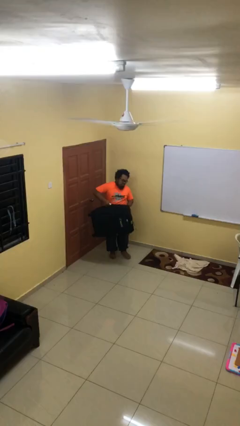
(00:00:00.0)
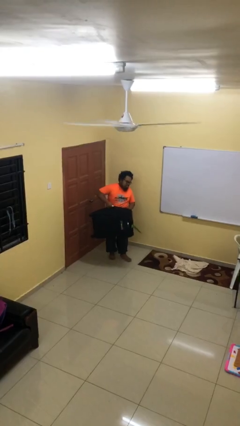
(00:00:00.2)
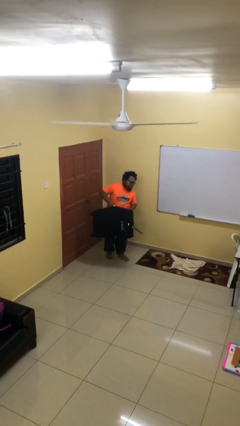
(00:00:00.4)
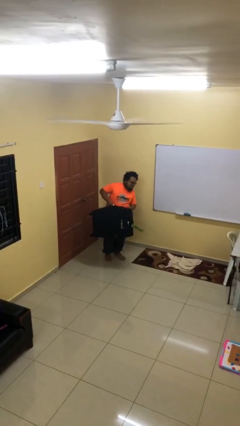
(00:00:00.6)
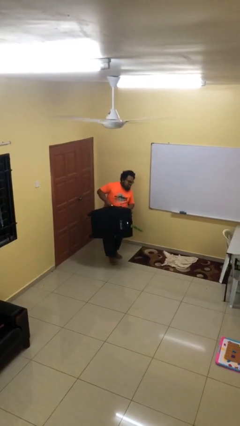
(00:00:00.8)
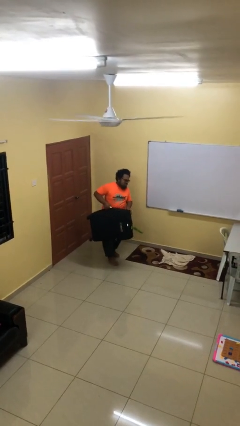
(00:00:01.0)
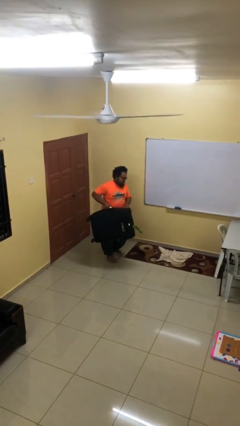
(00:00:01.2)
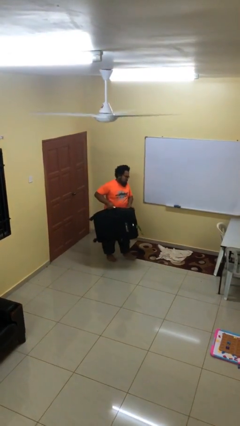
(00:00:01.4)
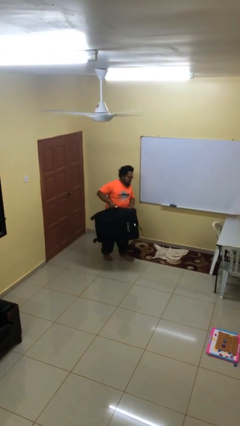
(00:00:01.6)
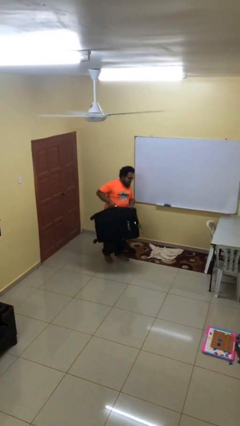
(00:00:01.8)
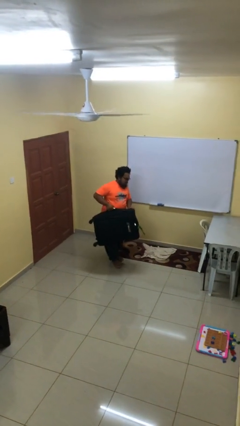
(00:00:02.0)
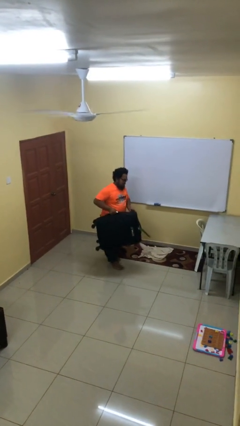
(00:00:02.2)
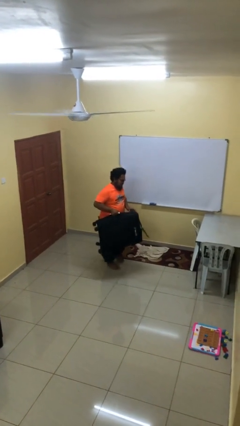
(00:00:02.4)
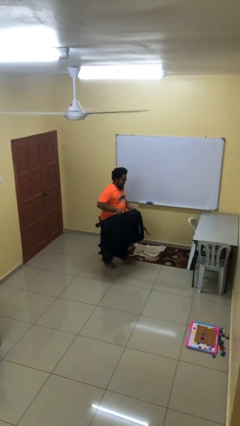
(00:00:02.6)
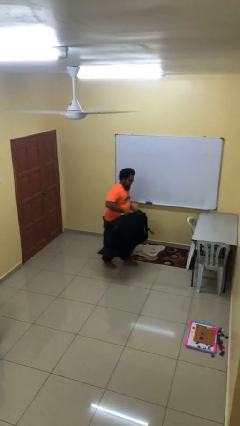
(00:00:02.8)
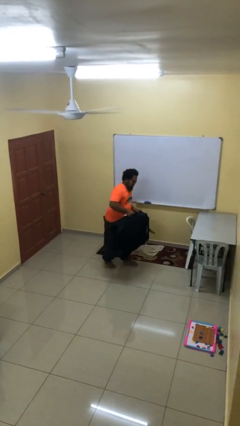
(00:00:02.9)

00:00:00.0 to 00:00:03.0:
person carries heavy object

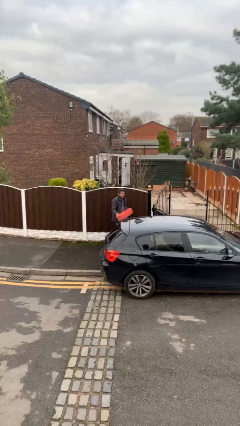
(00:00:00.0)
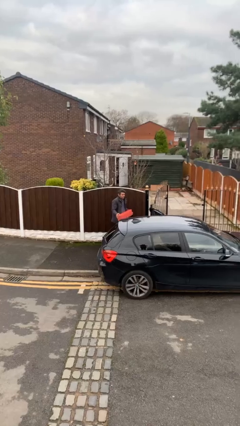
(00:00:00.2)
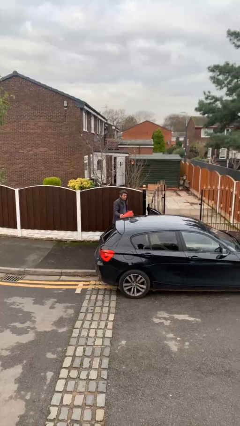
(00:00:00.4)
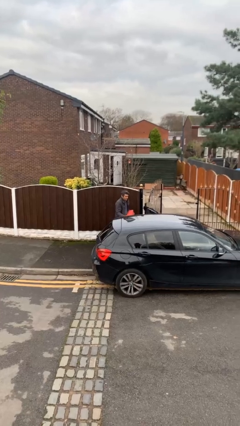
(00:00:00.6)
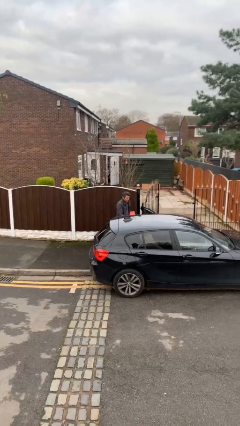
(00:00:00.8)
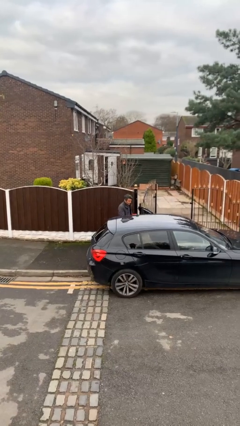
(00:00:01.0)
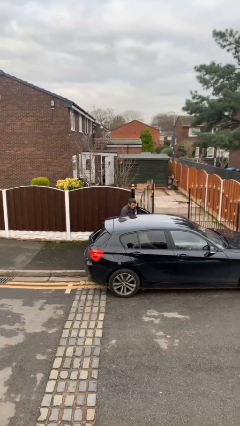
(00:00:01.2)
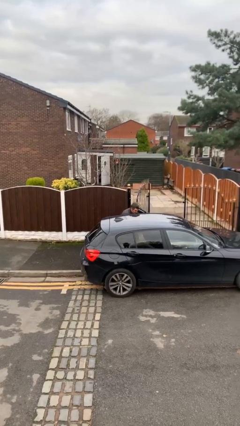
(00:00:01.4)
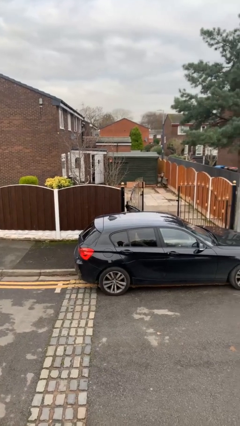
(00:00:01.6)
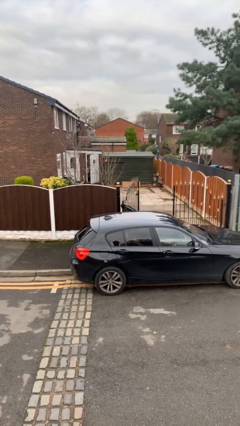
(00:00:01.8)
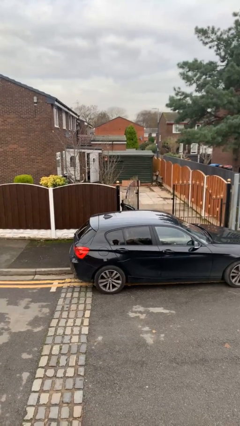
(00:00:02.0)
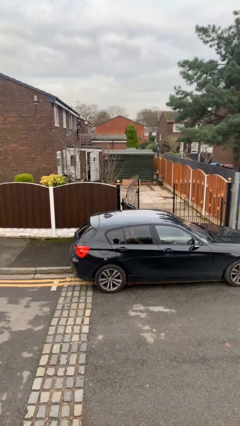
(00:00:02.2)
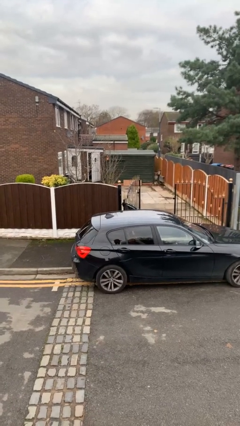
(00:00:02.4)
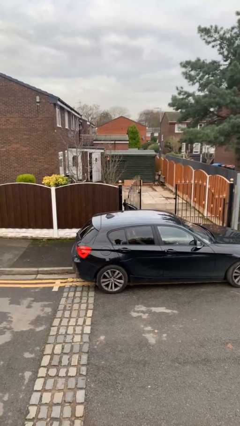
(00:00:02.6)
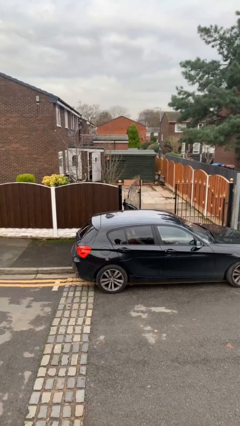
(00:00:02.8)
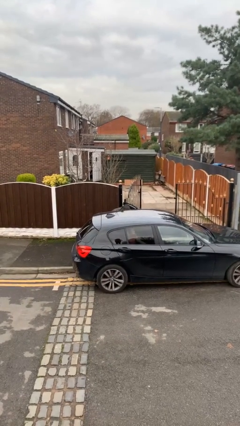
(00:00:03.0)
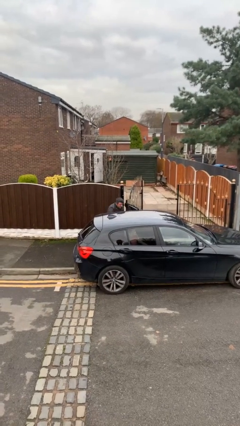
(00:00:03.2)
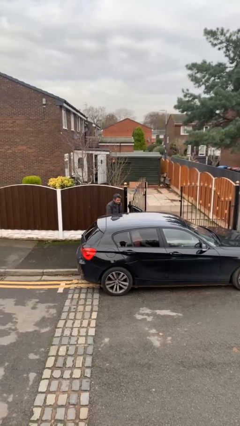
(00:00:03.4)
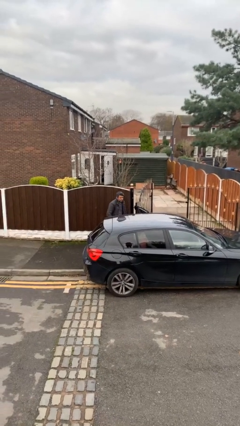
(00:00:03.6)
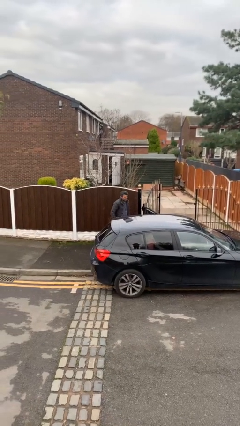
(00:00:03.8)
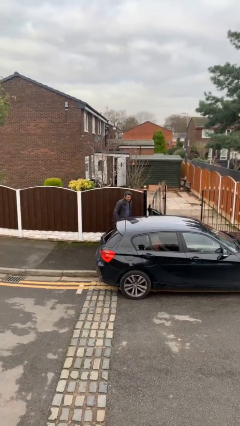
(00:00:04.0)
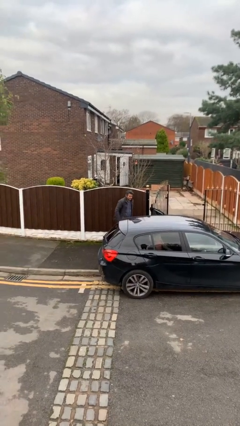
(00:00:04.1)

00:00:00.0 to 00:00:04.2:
person loads car

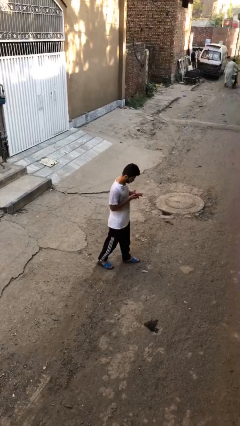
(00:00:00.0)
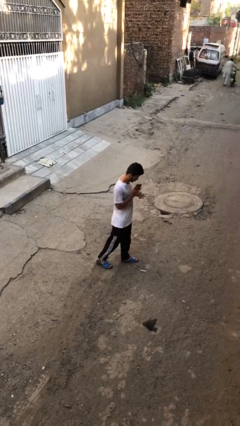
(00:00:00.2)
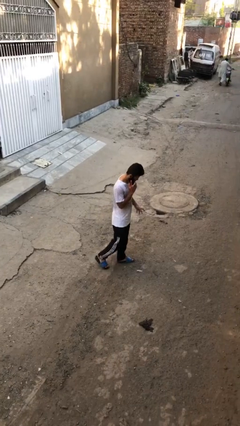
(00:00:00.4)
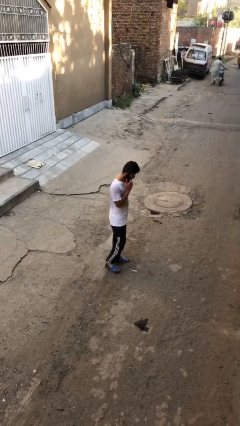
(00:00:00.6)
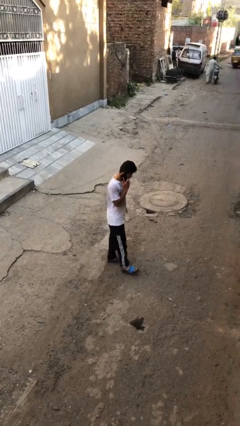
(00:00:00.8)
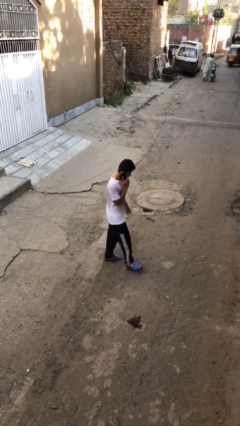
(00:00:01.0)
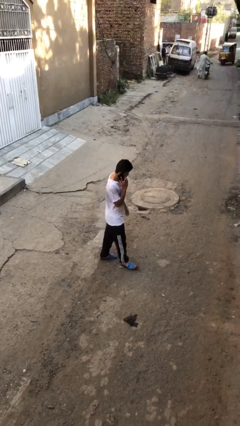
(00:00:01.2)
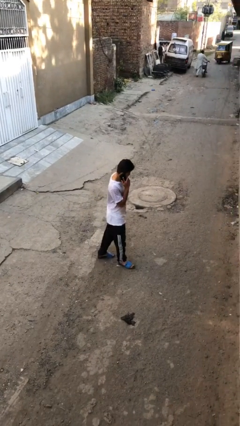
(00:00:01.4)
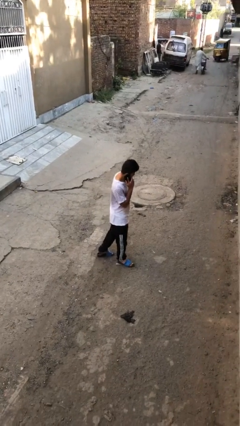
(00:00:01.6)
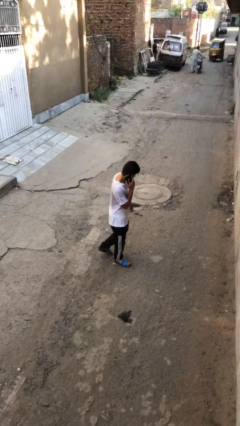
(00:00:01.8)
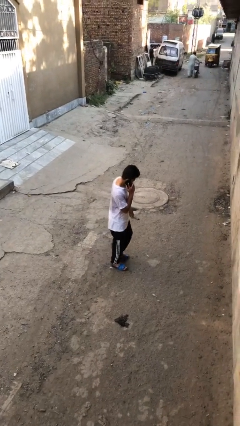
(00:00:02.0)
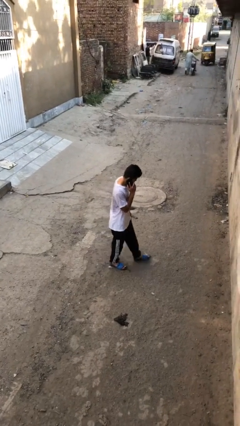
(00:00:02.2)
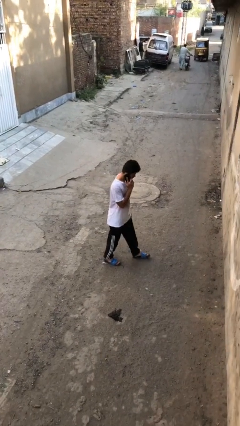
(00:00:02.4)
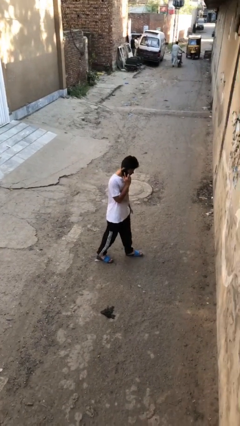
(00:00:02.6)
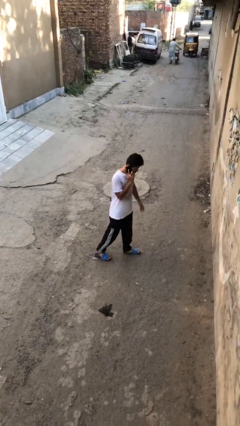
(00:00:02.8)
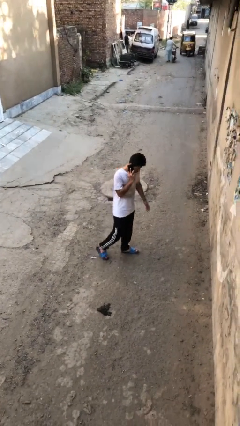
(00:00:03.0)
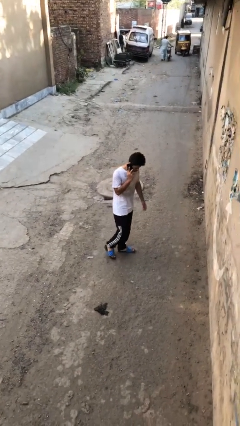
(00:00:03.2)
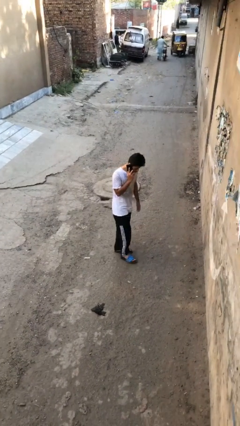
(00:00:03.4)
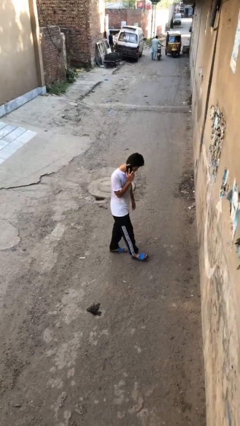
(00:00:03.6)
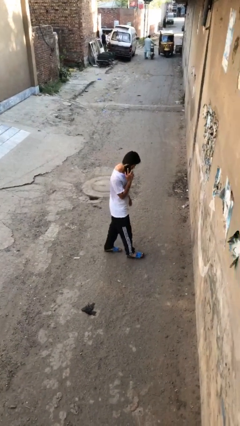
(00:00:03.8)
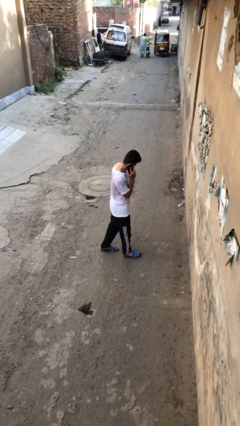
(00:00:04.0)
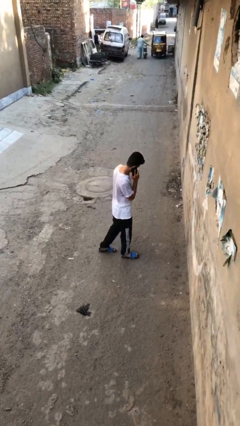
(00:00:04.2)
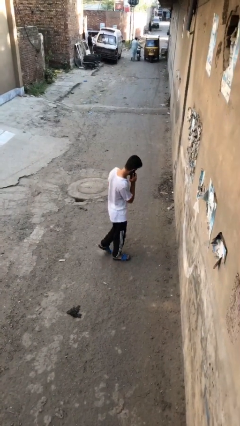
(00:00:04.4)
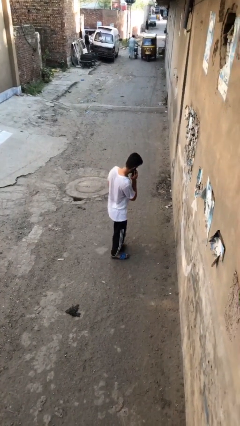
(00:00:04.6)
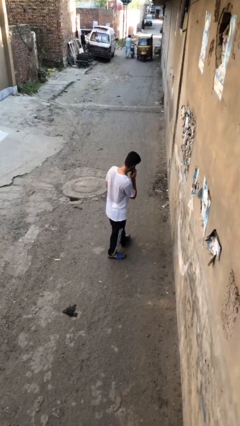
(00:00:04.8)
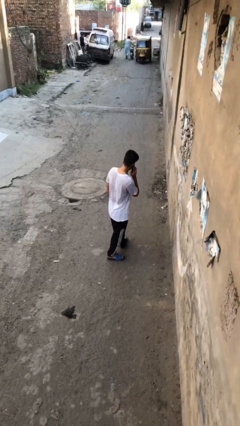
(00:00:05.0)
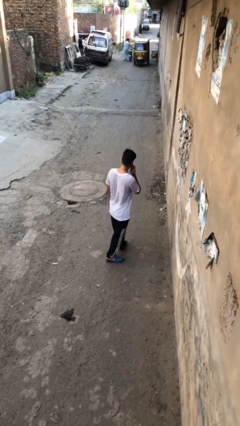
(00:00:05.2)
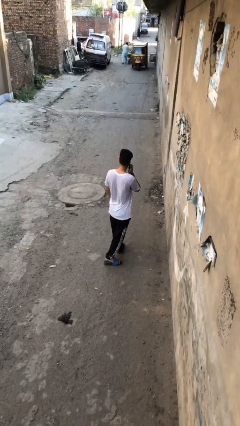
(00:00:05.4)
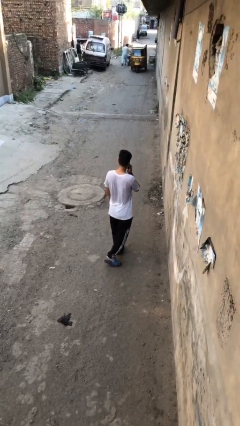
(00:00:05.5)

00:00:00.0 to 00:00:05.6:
person talks on phone

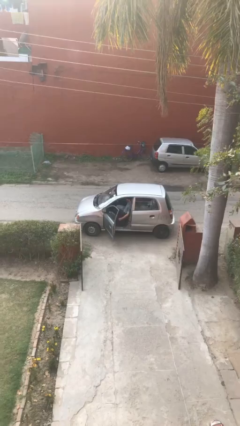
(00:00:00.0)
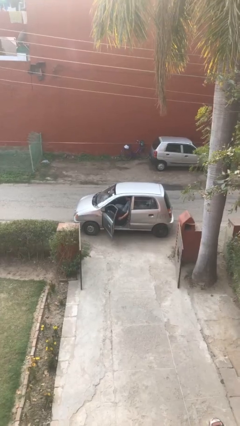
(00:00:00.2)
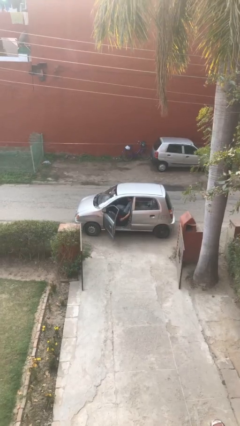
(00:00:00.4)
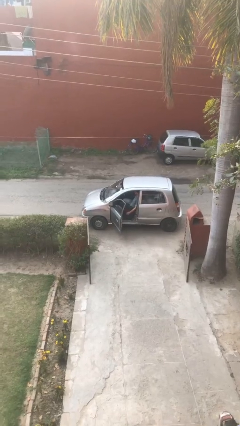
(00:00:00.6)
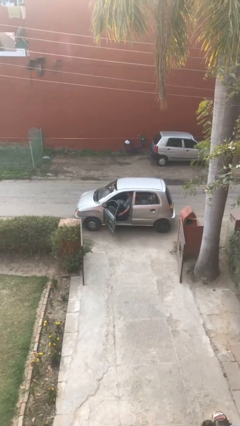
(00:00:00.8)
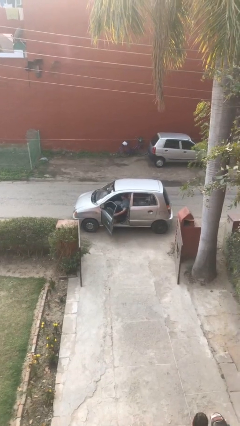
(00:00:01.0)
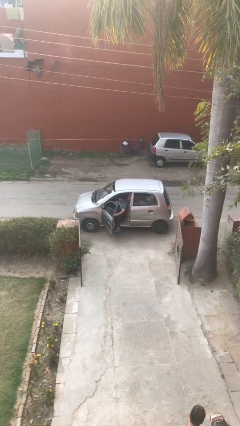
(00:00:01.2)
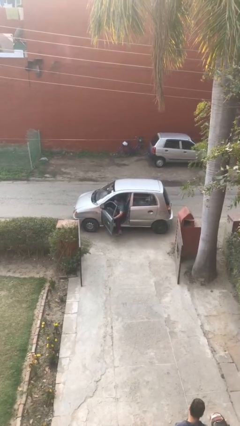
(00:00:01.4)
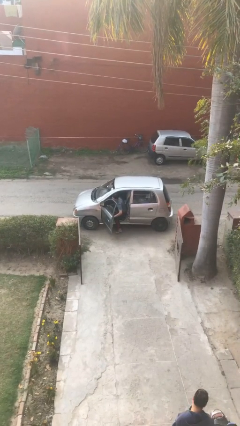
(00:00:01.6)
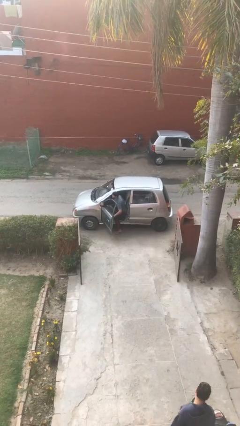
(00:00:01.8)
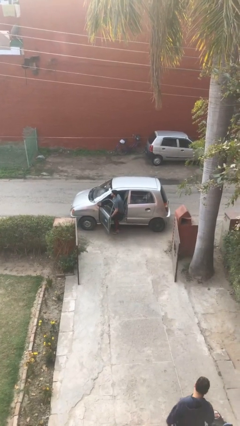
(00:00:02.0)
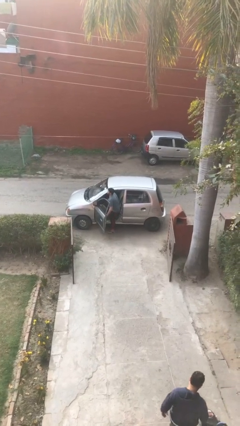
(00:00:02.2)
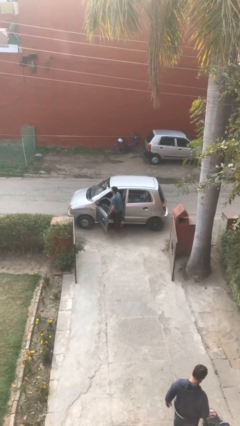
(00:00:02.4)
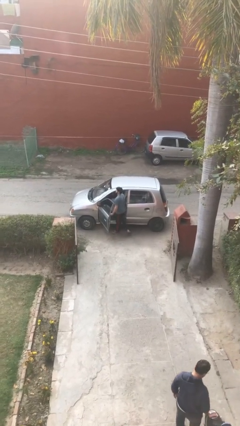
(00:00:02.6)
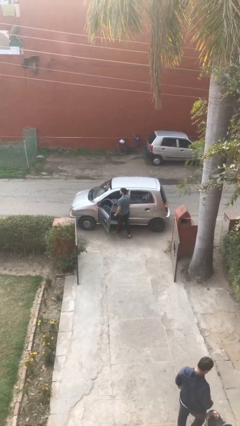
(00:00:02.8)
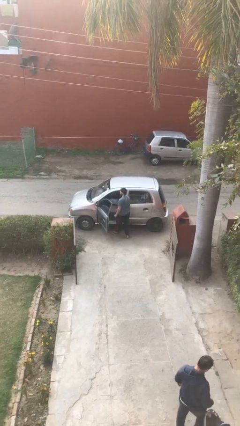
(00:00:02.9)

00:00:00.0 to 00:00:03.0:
person exits car

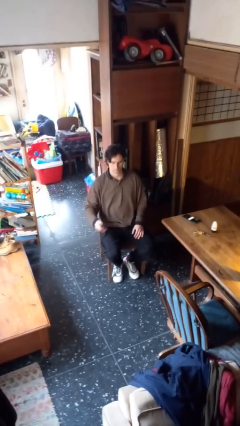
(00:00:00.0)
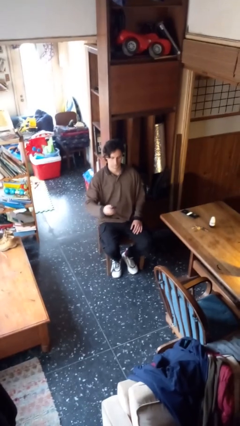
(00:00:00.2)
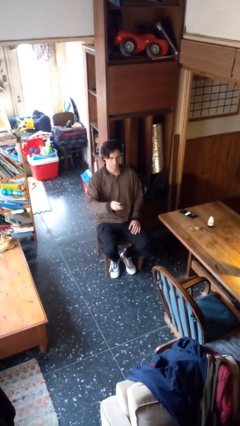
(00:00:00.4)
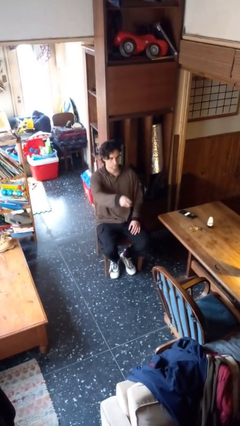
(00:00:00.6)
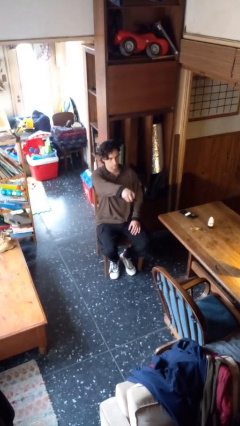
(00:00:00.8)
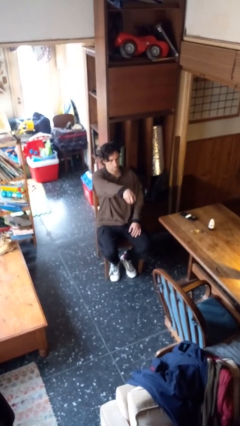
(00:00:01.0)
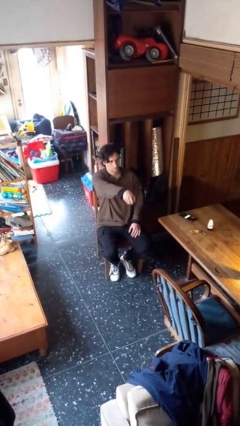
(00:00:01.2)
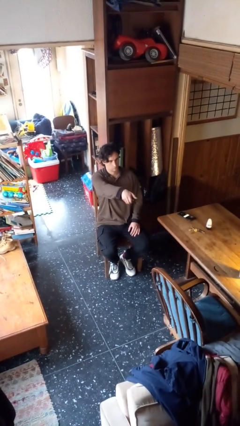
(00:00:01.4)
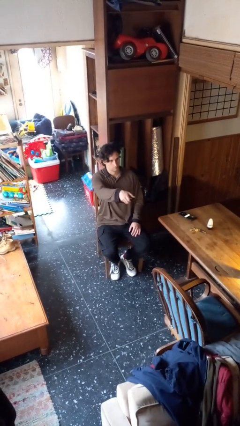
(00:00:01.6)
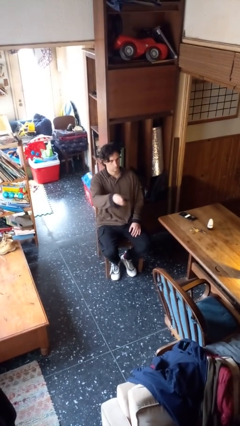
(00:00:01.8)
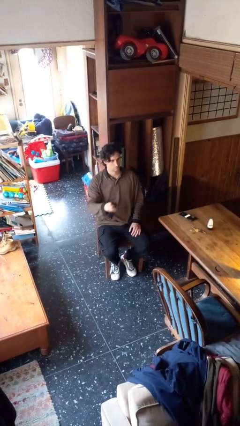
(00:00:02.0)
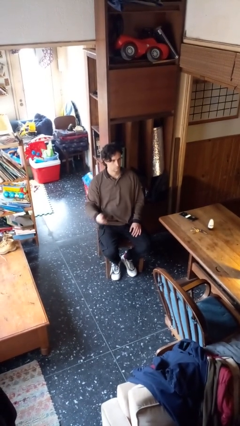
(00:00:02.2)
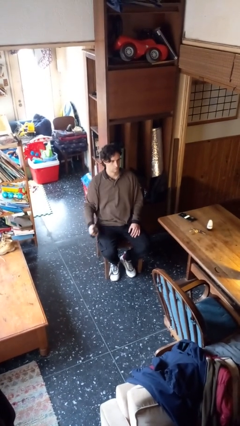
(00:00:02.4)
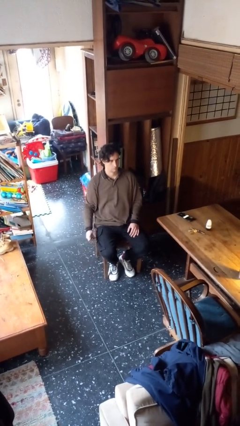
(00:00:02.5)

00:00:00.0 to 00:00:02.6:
person uses television remote
